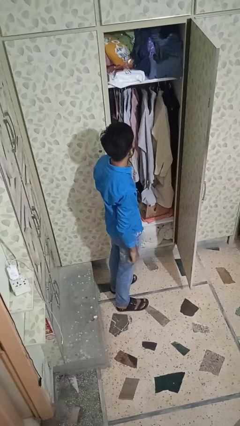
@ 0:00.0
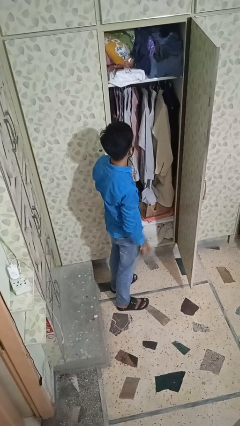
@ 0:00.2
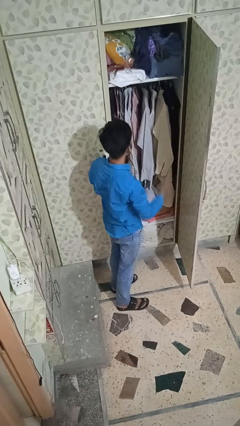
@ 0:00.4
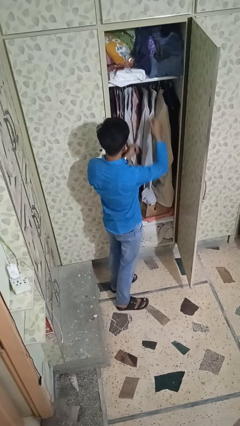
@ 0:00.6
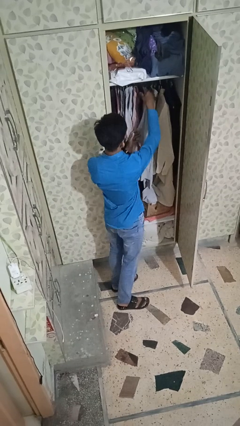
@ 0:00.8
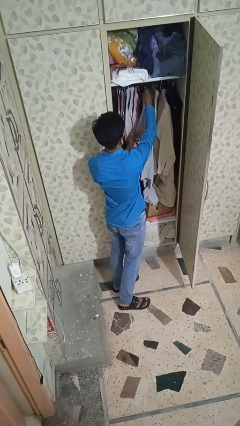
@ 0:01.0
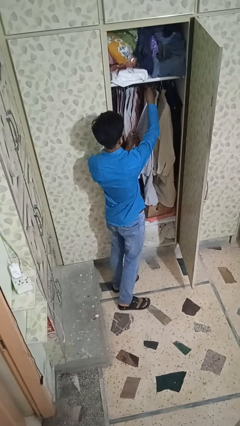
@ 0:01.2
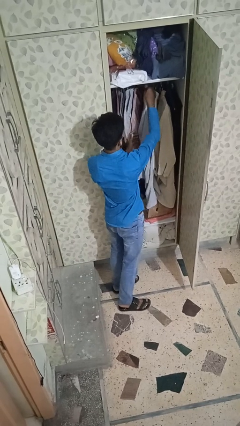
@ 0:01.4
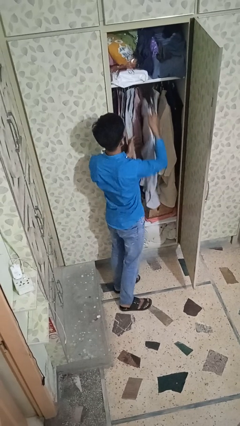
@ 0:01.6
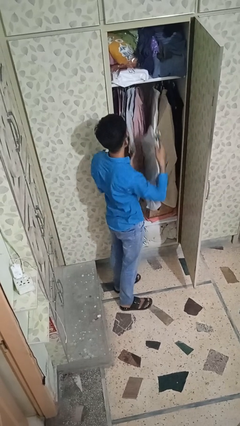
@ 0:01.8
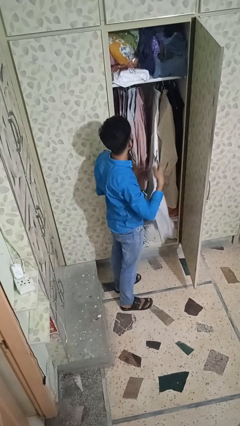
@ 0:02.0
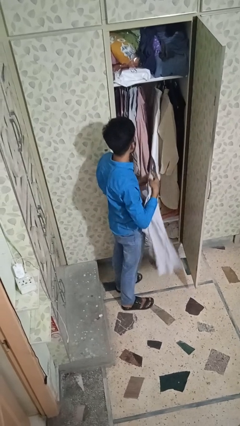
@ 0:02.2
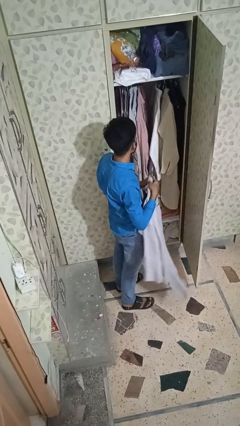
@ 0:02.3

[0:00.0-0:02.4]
person takes clothes from closet

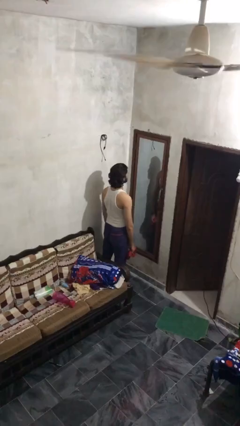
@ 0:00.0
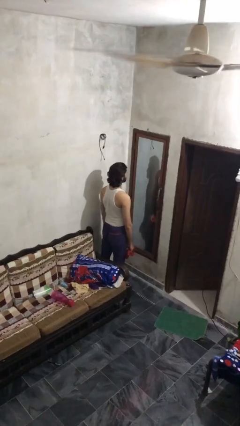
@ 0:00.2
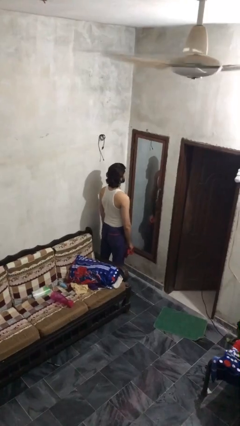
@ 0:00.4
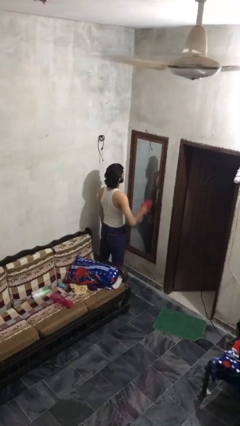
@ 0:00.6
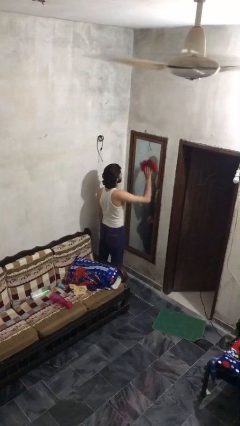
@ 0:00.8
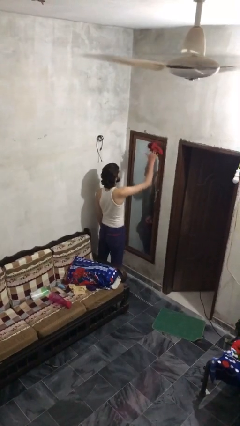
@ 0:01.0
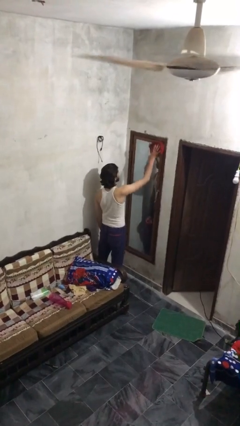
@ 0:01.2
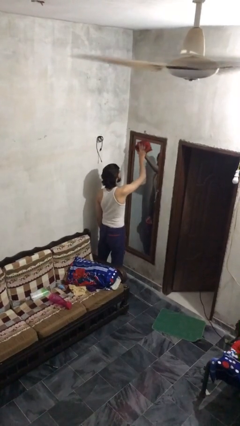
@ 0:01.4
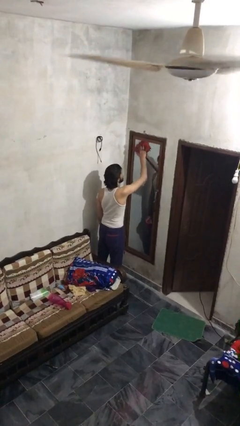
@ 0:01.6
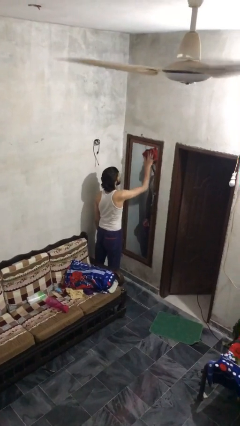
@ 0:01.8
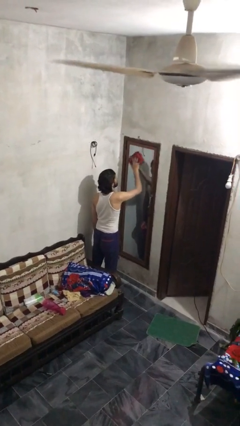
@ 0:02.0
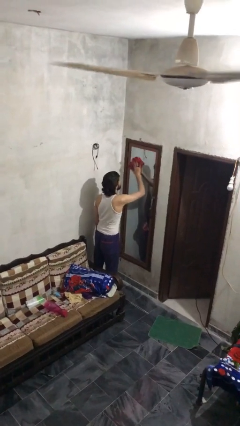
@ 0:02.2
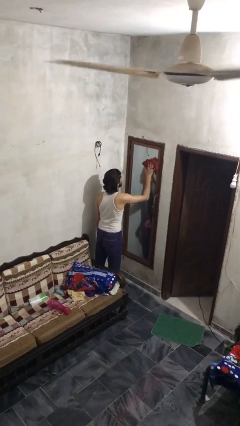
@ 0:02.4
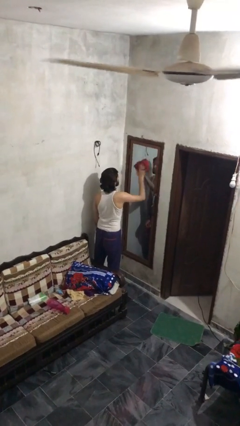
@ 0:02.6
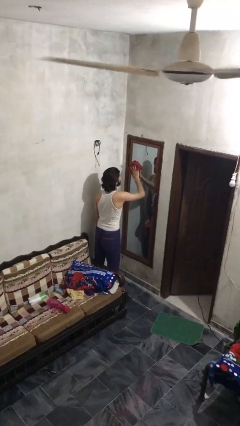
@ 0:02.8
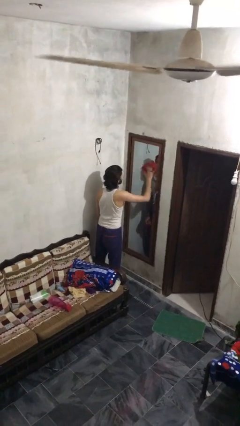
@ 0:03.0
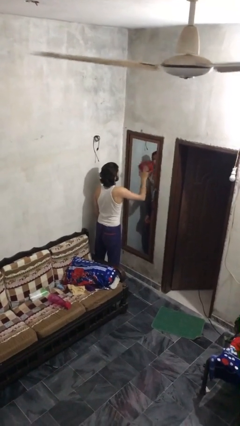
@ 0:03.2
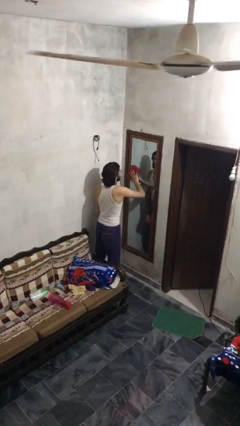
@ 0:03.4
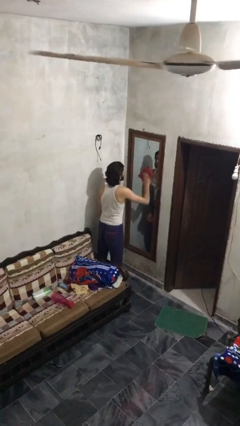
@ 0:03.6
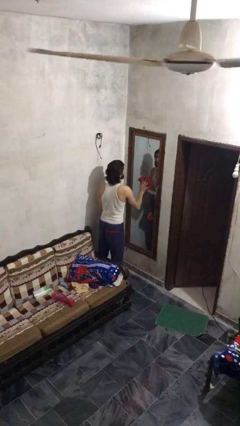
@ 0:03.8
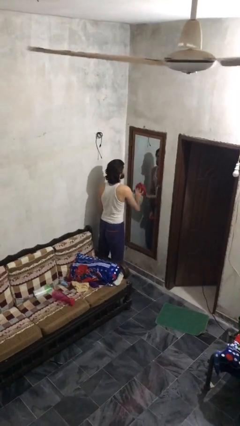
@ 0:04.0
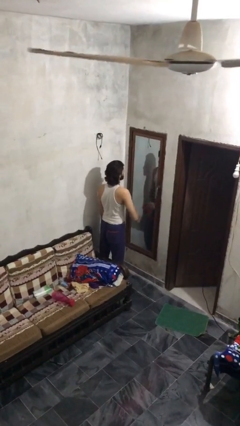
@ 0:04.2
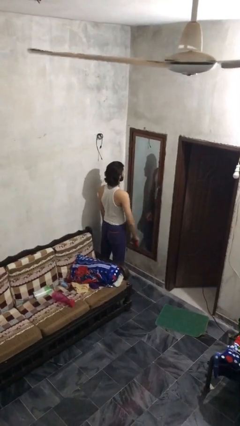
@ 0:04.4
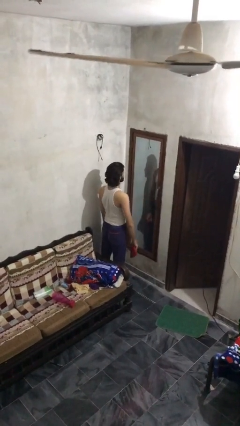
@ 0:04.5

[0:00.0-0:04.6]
person washes window

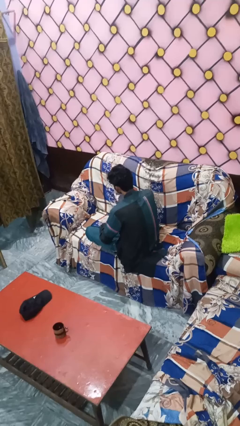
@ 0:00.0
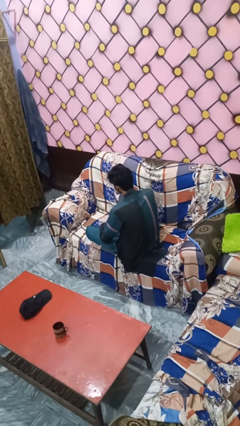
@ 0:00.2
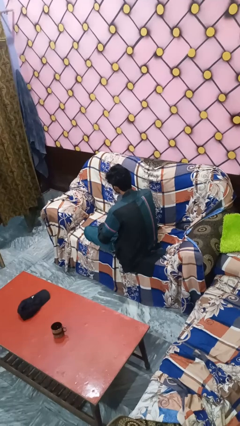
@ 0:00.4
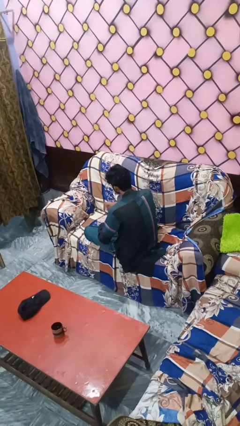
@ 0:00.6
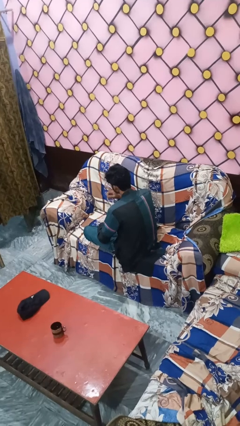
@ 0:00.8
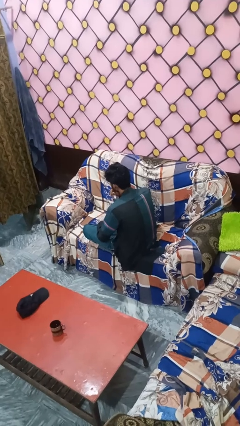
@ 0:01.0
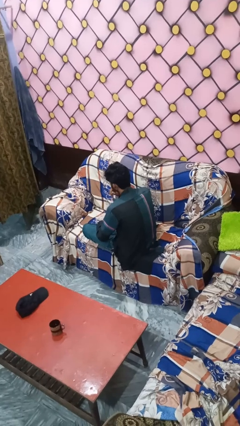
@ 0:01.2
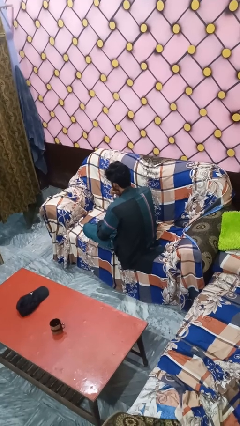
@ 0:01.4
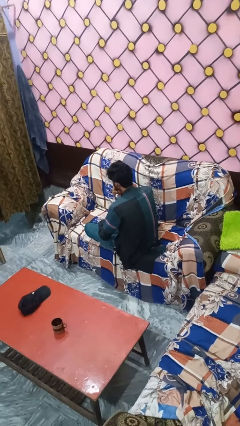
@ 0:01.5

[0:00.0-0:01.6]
person gestures be quiet

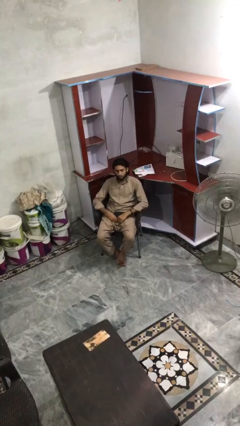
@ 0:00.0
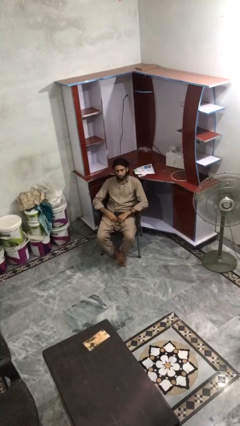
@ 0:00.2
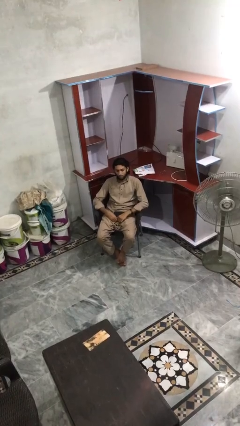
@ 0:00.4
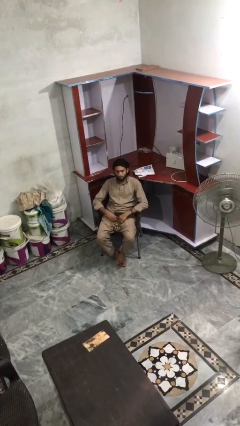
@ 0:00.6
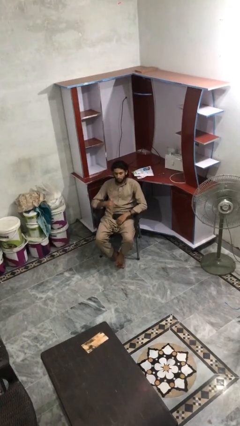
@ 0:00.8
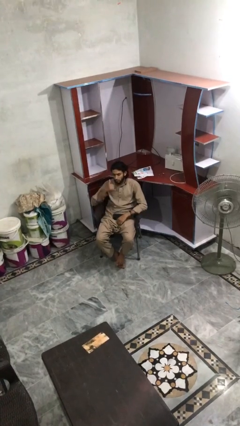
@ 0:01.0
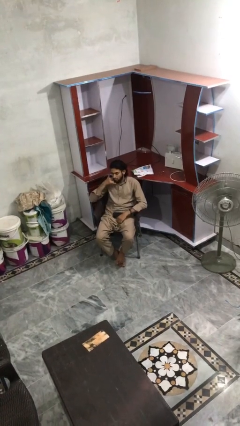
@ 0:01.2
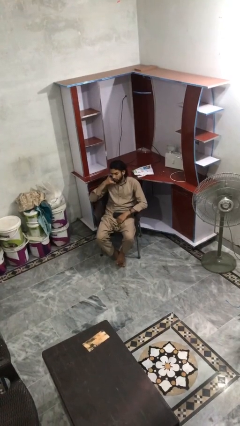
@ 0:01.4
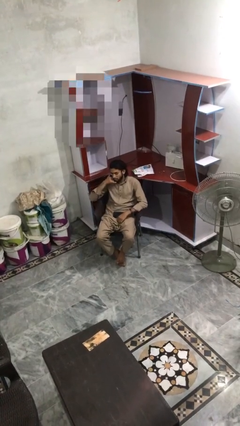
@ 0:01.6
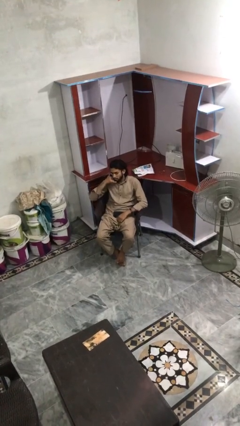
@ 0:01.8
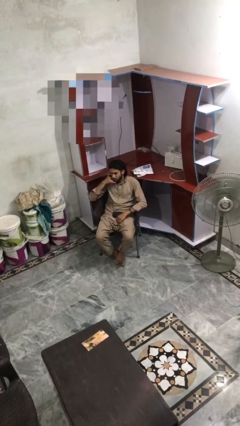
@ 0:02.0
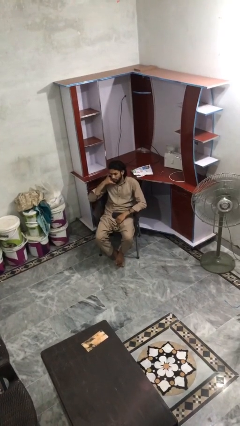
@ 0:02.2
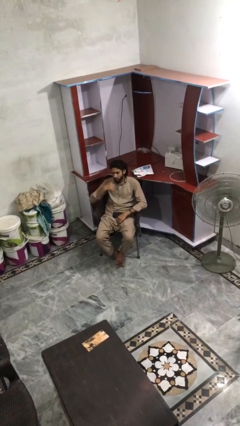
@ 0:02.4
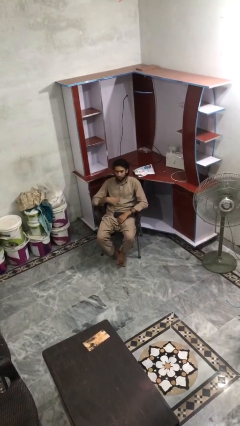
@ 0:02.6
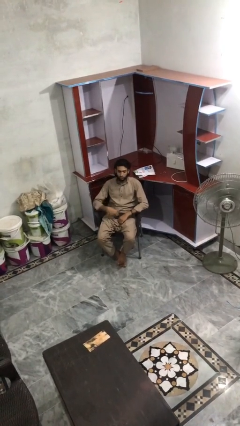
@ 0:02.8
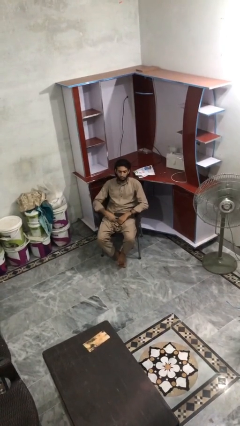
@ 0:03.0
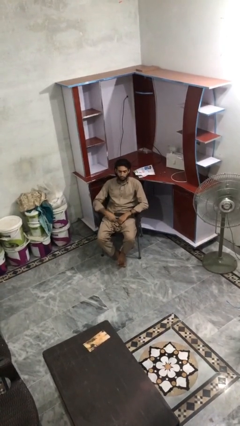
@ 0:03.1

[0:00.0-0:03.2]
person gestures call me

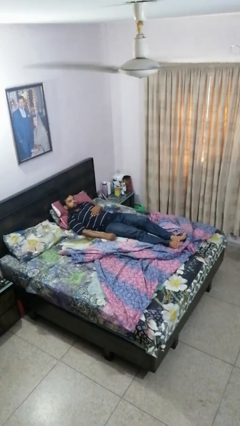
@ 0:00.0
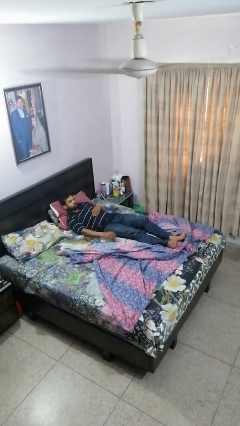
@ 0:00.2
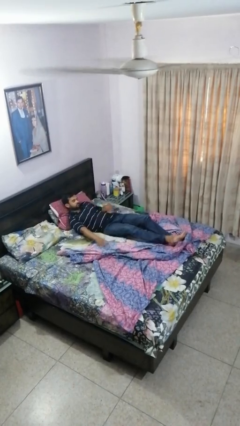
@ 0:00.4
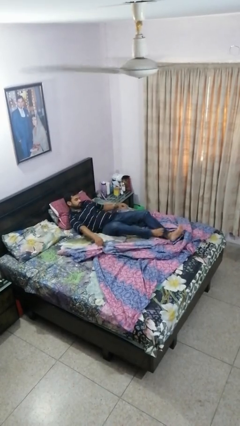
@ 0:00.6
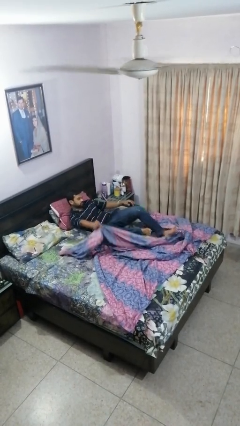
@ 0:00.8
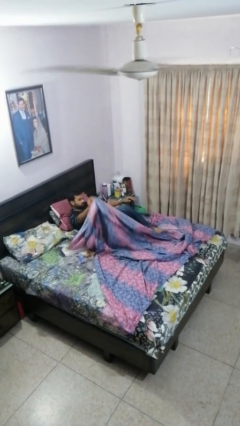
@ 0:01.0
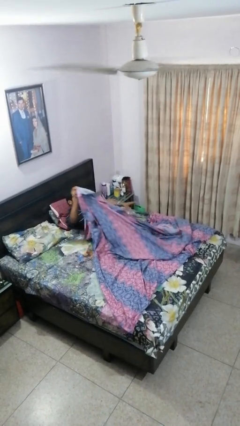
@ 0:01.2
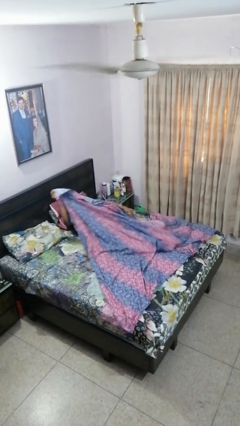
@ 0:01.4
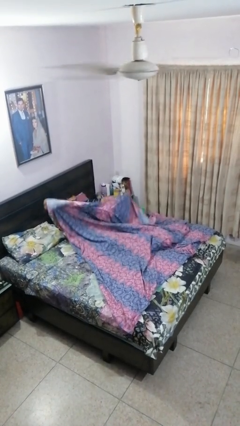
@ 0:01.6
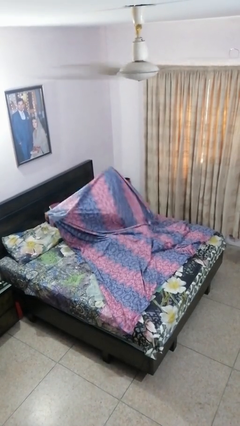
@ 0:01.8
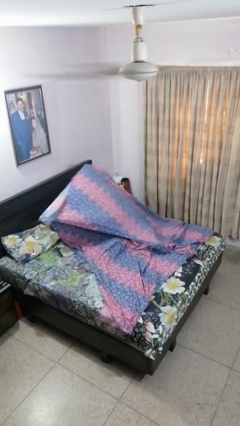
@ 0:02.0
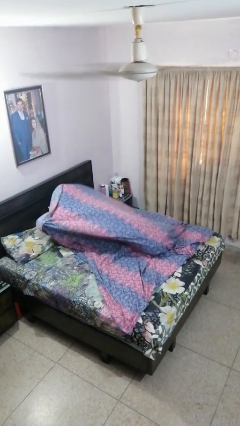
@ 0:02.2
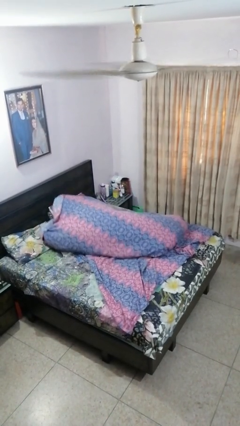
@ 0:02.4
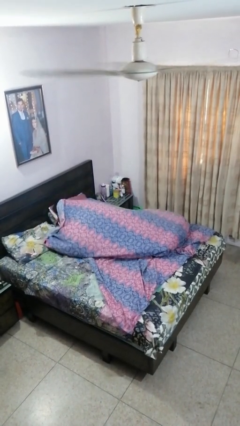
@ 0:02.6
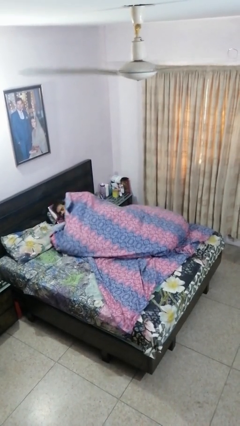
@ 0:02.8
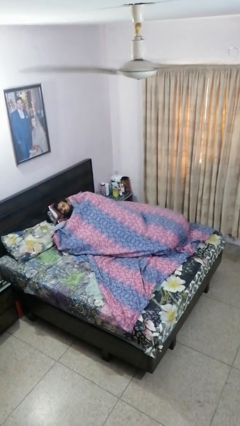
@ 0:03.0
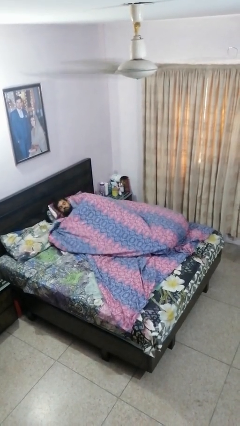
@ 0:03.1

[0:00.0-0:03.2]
person covers with bedsheets

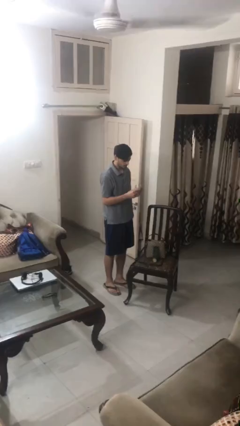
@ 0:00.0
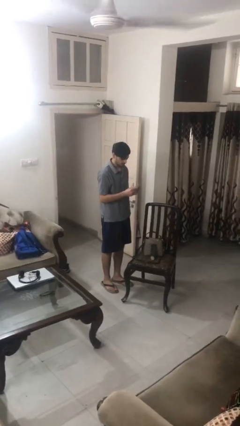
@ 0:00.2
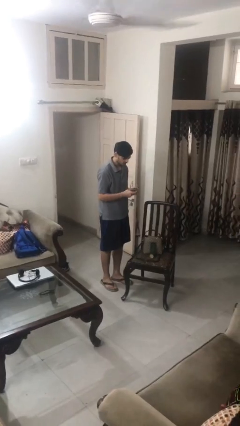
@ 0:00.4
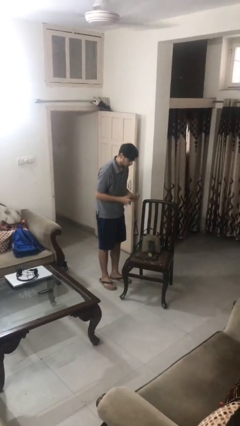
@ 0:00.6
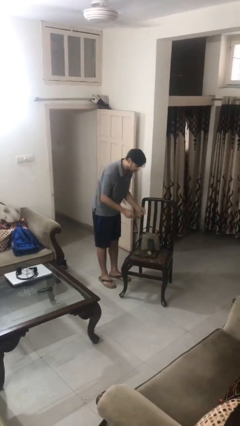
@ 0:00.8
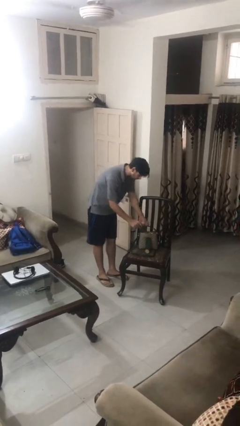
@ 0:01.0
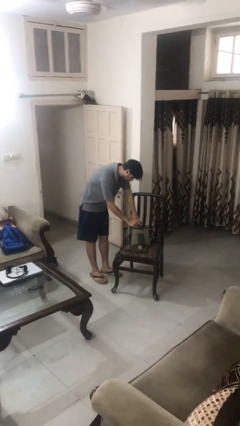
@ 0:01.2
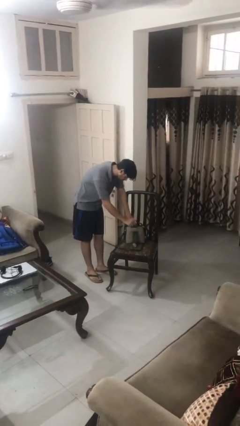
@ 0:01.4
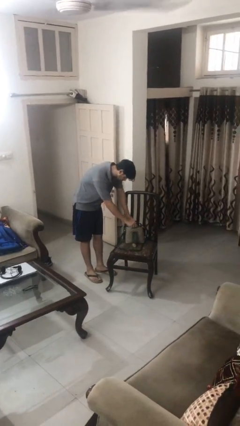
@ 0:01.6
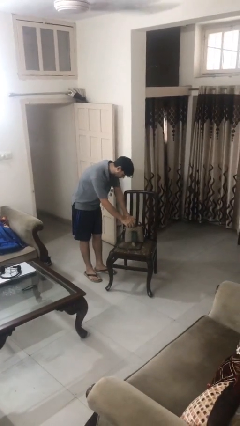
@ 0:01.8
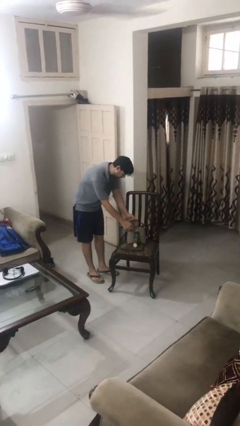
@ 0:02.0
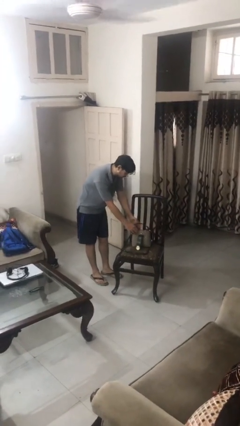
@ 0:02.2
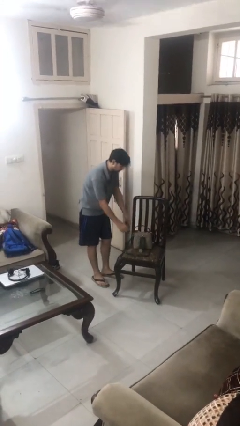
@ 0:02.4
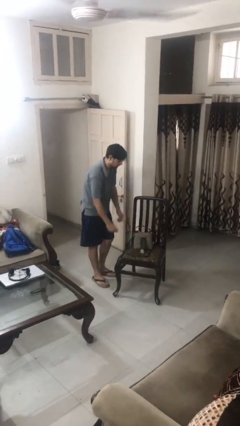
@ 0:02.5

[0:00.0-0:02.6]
person puts object into purse
